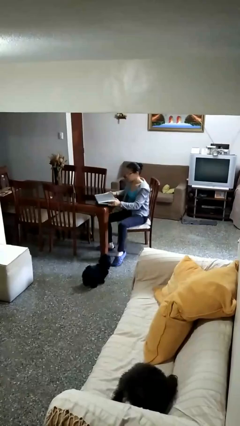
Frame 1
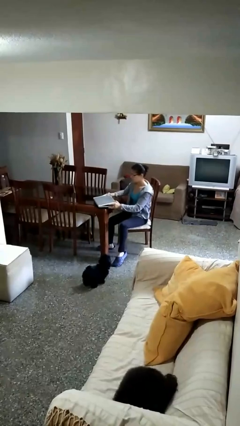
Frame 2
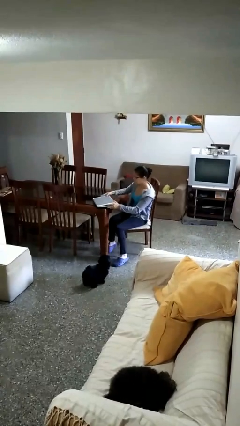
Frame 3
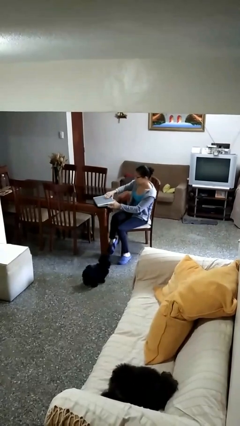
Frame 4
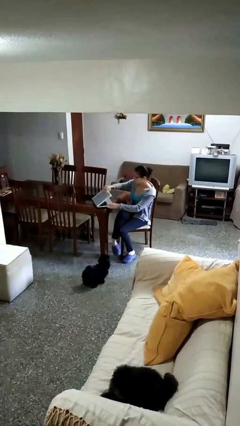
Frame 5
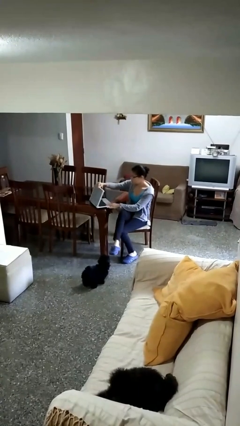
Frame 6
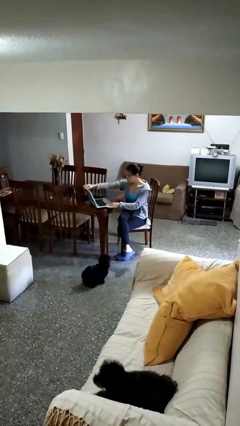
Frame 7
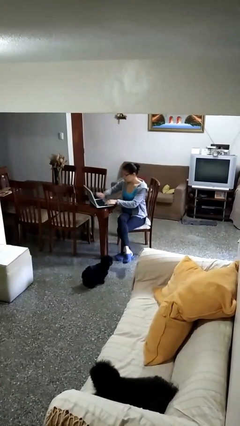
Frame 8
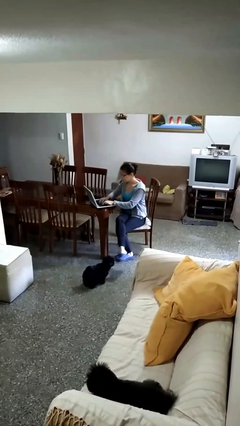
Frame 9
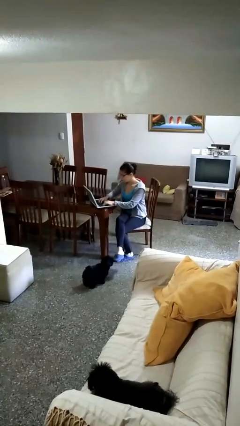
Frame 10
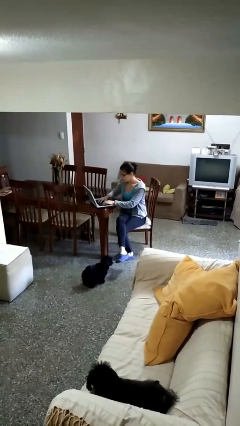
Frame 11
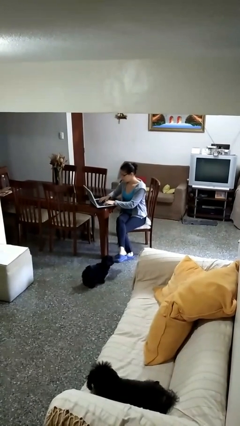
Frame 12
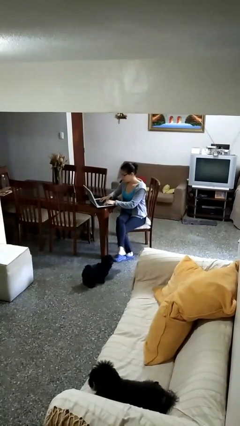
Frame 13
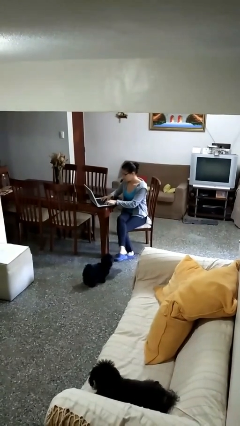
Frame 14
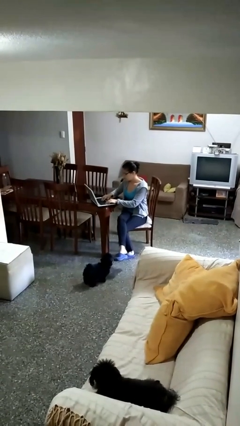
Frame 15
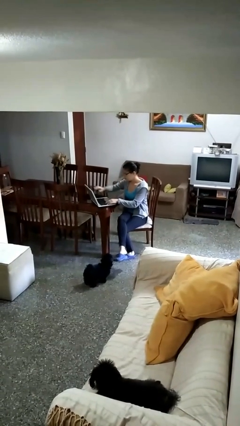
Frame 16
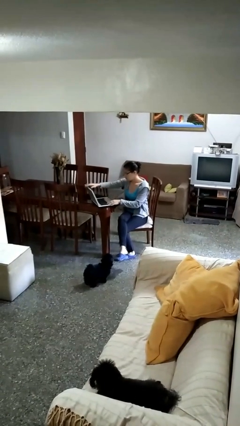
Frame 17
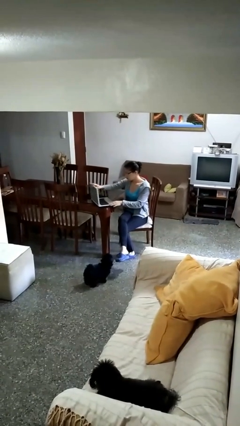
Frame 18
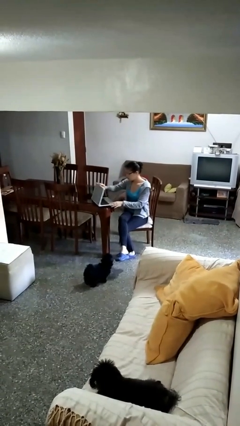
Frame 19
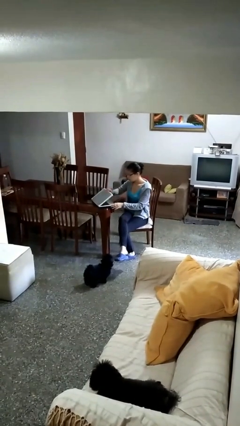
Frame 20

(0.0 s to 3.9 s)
person interacts with laptop

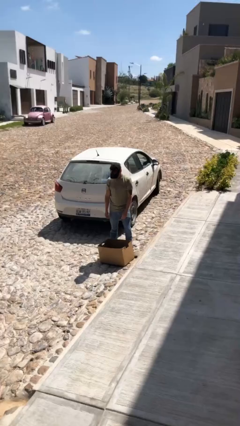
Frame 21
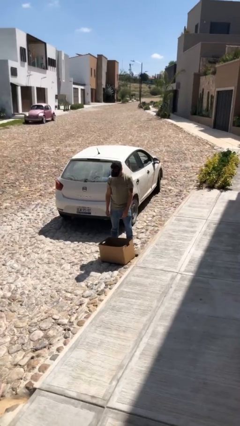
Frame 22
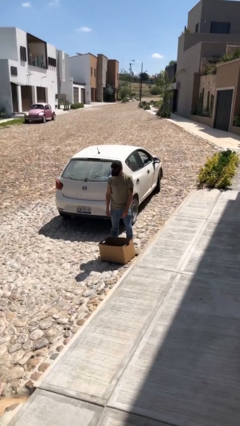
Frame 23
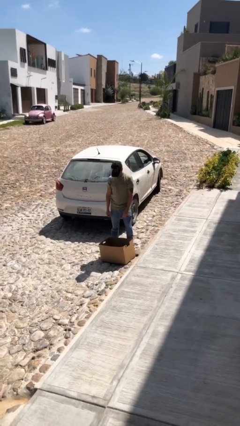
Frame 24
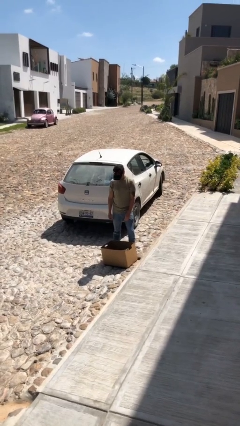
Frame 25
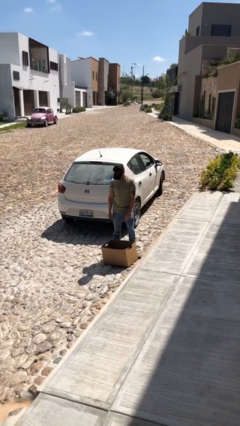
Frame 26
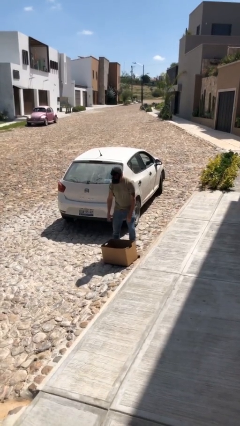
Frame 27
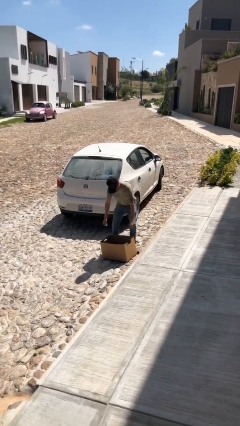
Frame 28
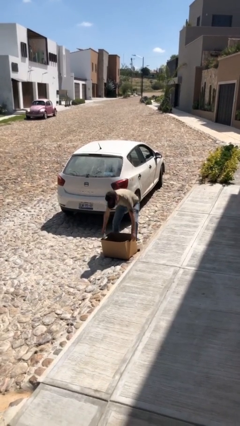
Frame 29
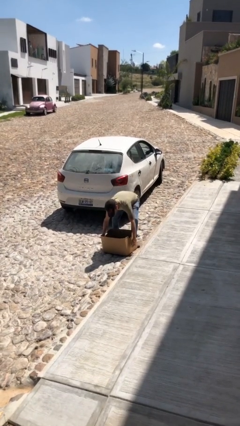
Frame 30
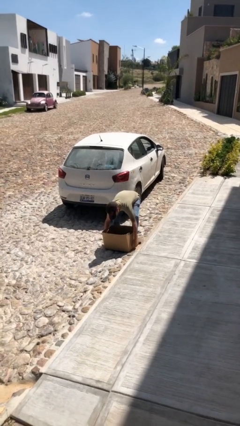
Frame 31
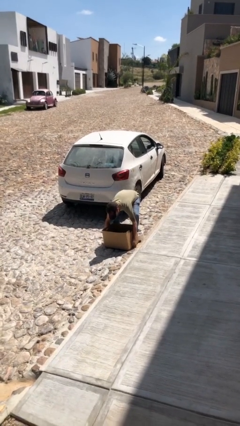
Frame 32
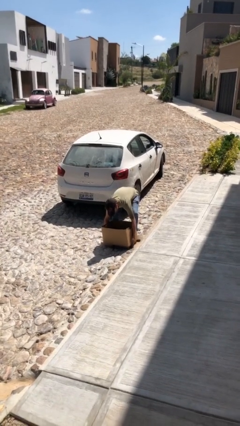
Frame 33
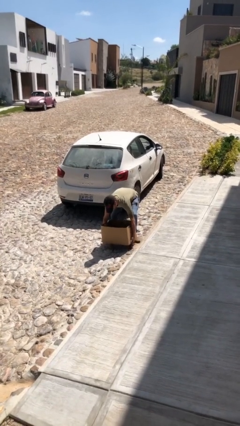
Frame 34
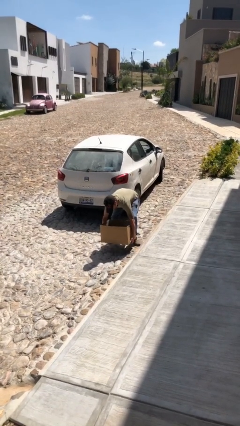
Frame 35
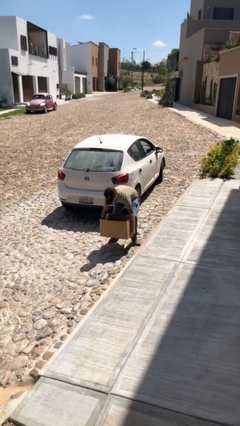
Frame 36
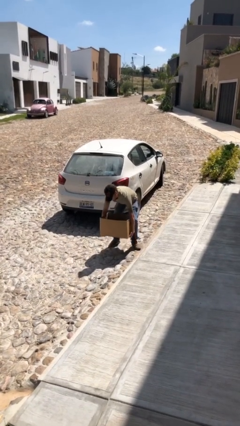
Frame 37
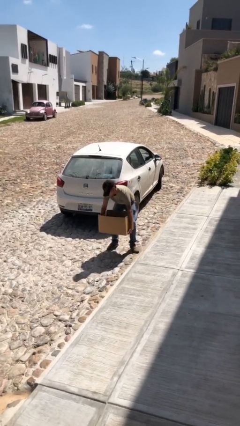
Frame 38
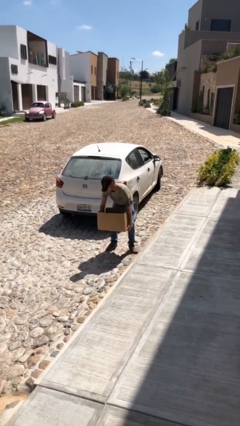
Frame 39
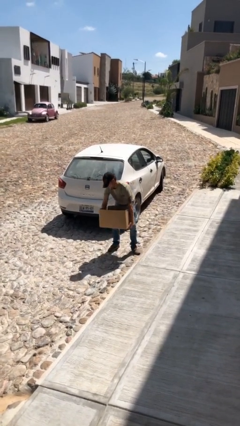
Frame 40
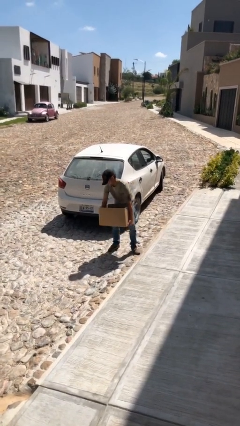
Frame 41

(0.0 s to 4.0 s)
person picks up object from floor

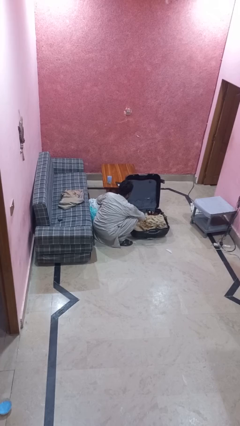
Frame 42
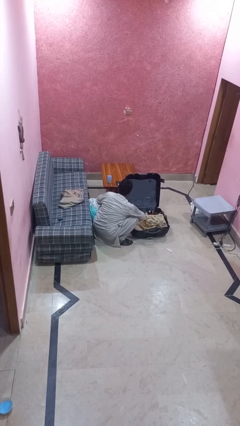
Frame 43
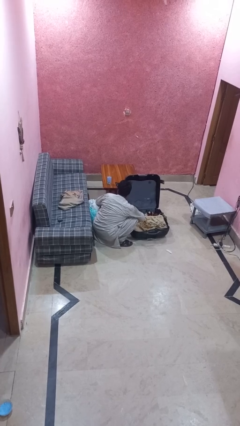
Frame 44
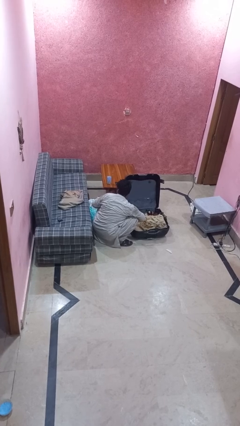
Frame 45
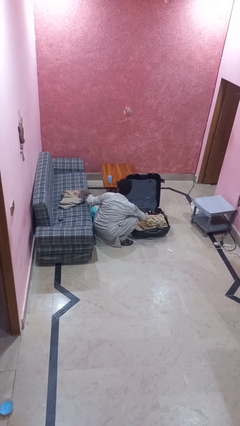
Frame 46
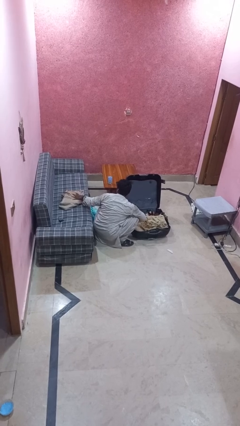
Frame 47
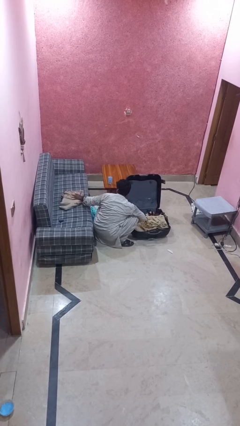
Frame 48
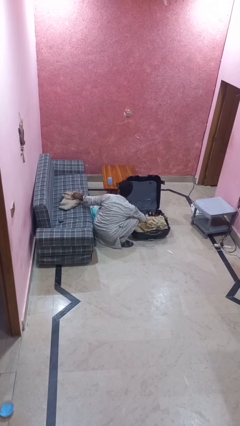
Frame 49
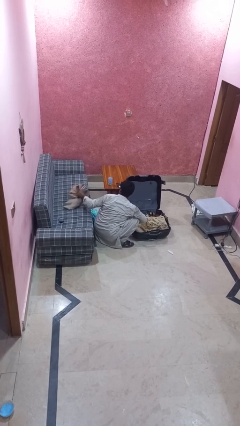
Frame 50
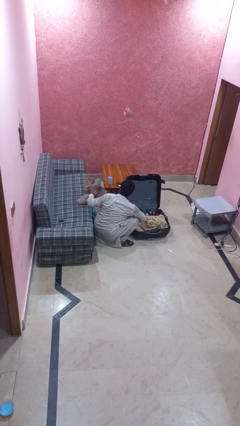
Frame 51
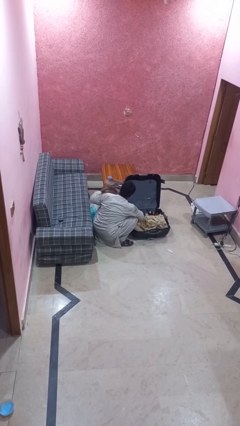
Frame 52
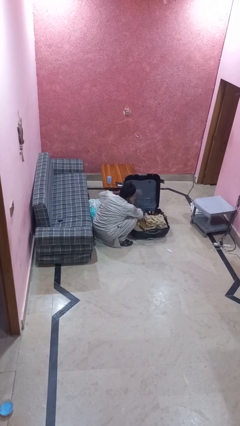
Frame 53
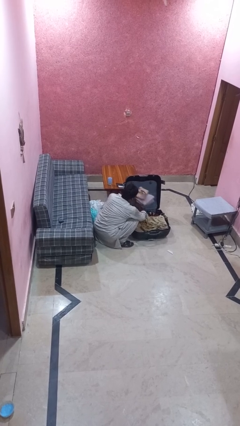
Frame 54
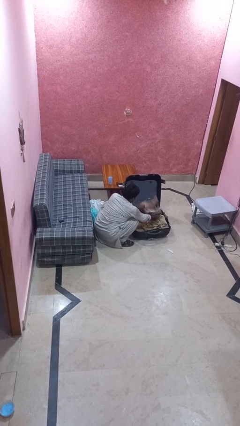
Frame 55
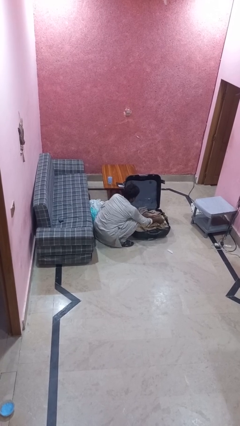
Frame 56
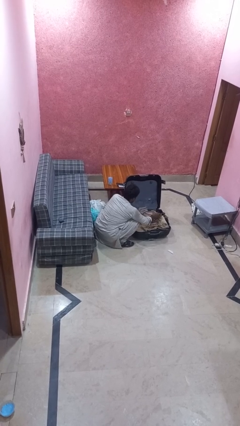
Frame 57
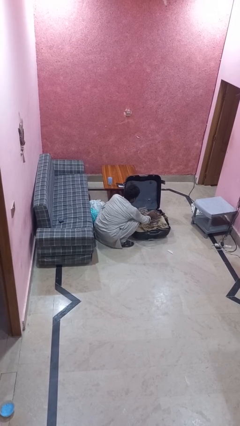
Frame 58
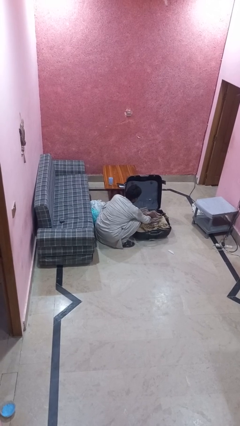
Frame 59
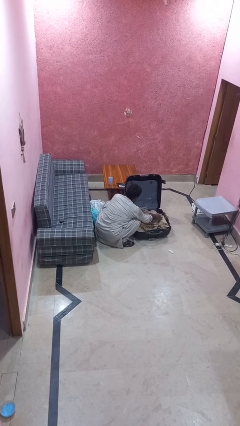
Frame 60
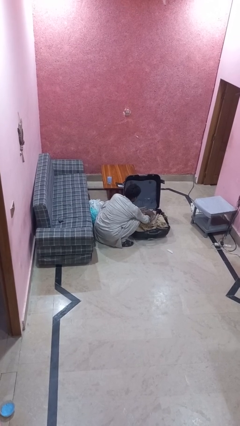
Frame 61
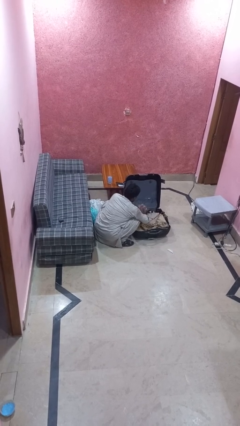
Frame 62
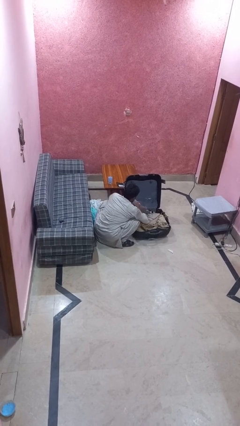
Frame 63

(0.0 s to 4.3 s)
person loads clothes into suitcase

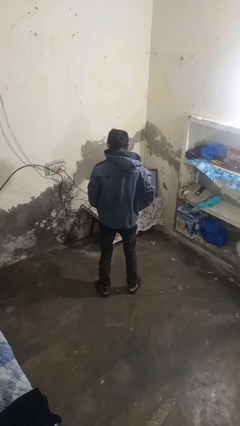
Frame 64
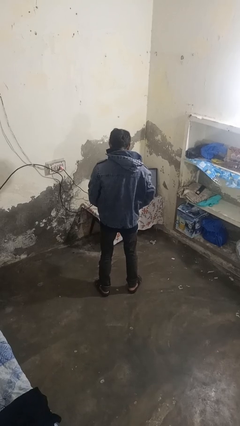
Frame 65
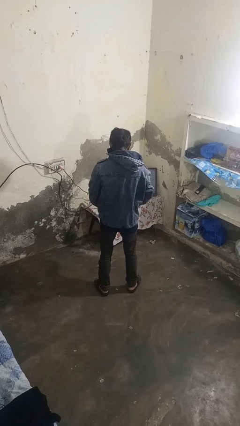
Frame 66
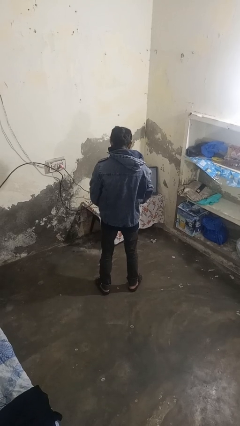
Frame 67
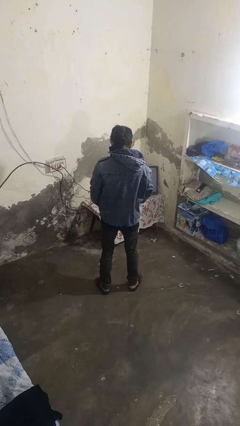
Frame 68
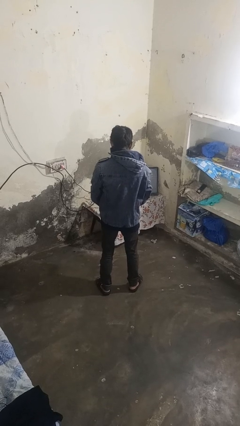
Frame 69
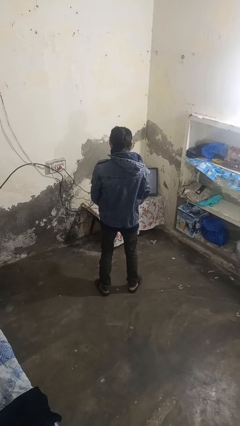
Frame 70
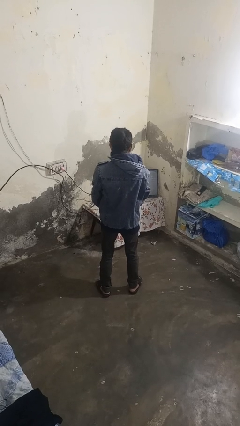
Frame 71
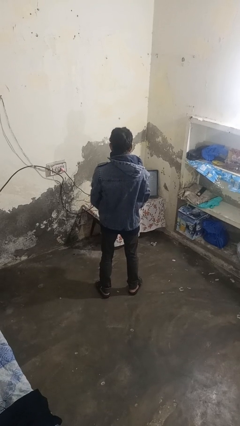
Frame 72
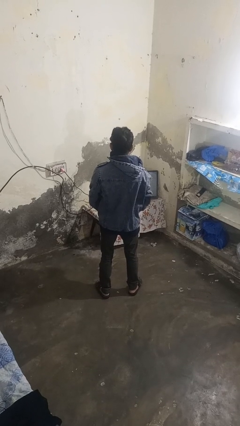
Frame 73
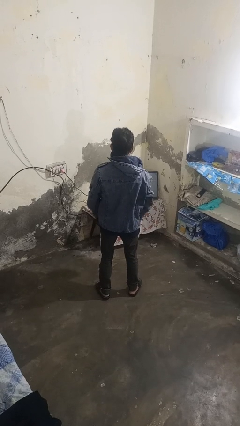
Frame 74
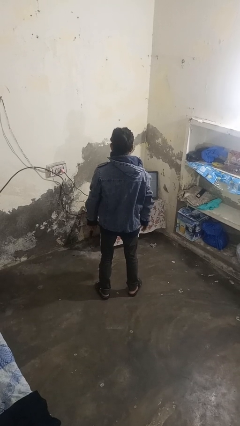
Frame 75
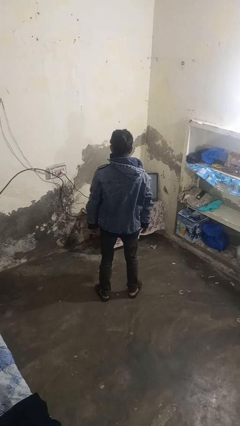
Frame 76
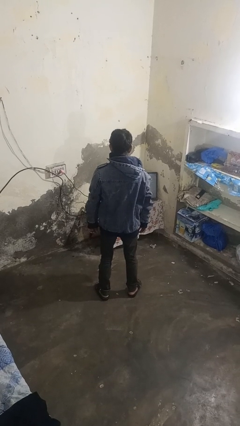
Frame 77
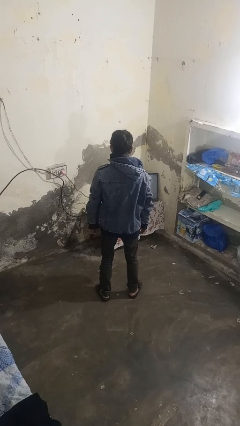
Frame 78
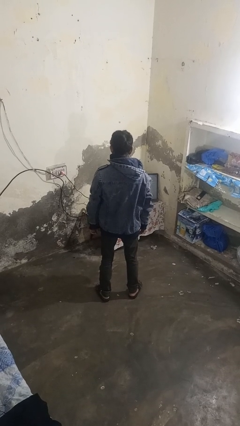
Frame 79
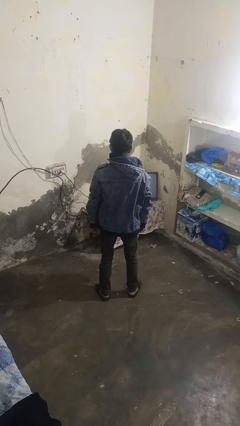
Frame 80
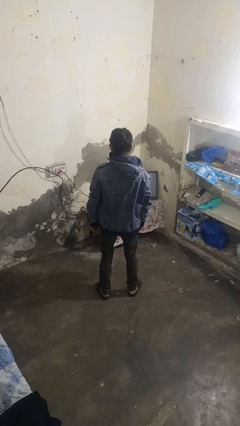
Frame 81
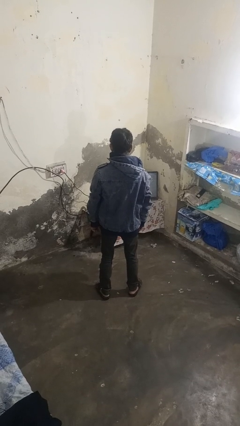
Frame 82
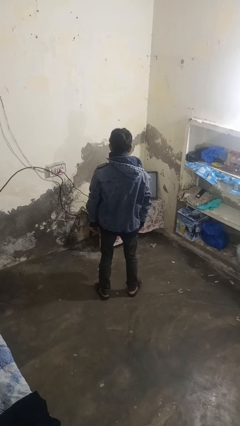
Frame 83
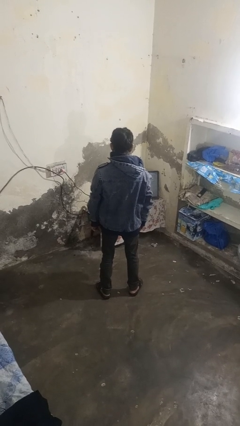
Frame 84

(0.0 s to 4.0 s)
person zips up jacket

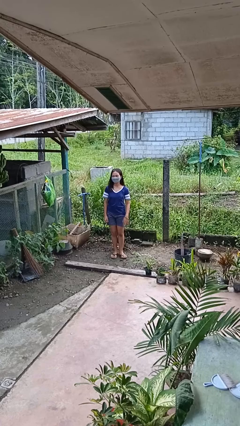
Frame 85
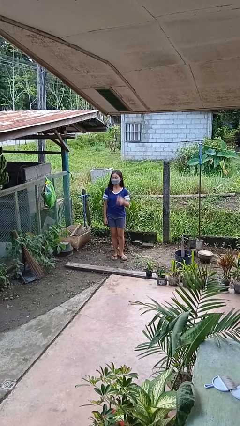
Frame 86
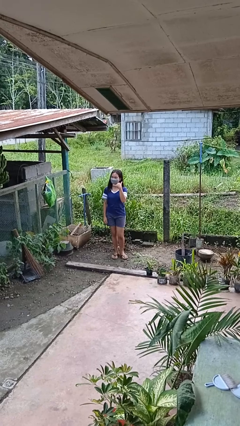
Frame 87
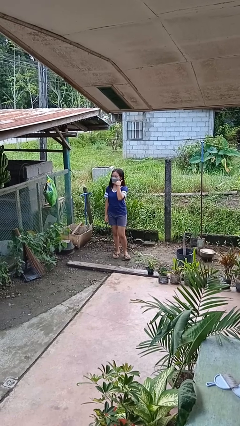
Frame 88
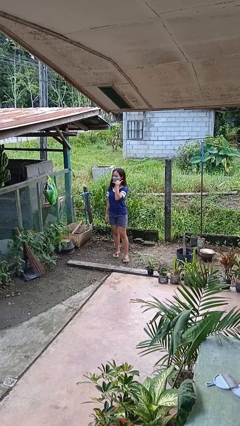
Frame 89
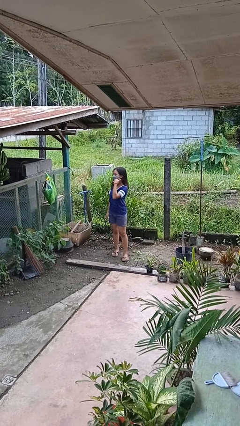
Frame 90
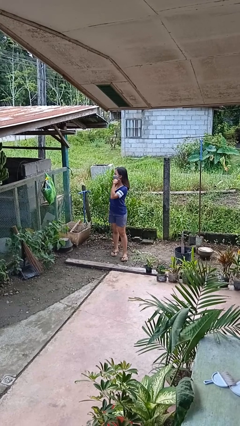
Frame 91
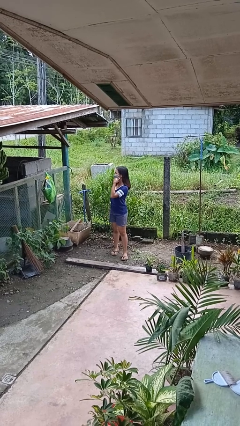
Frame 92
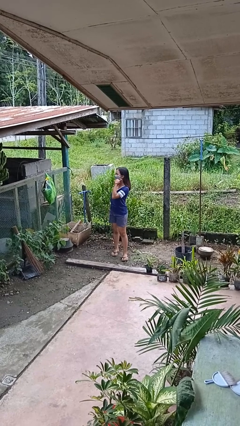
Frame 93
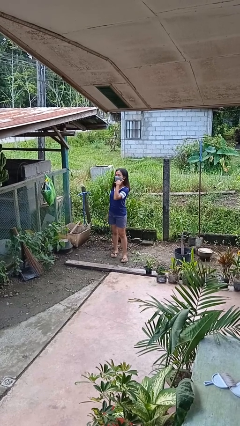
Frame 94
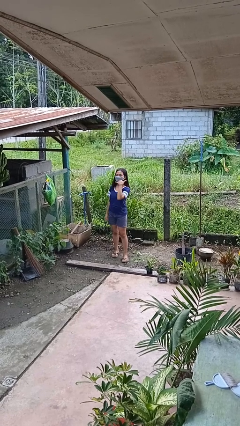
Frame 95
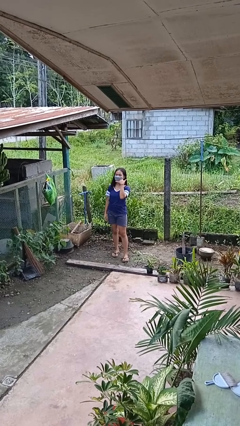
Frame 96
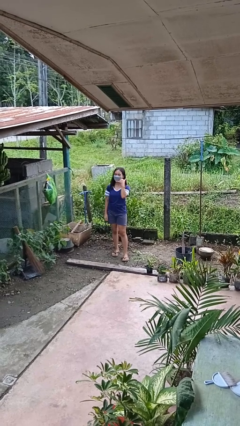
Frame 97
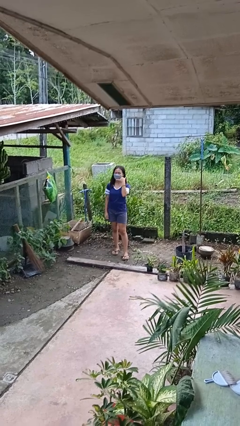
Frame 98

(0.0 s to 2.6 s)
person gestures call me
